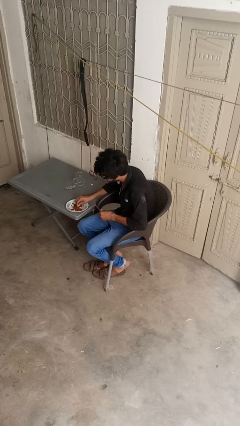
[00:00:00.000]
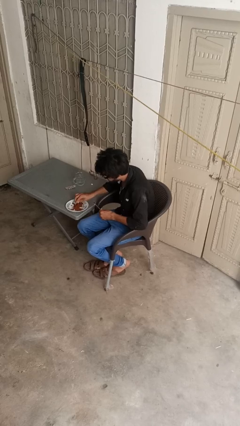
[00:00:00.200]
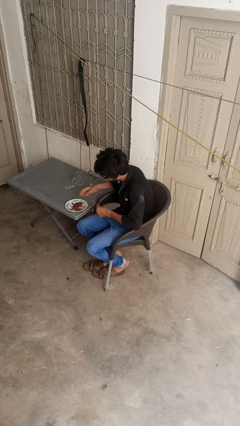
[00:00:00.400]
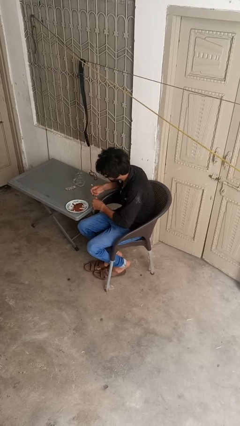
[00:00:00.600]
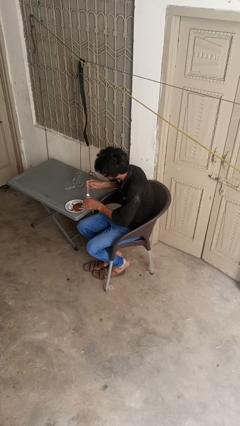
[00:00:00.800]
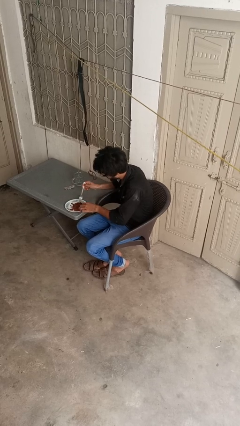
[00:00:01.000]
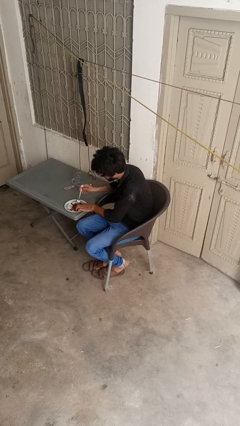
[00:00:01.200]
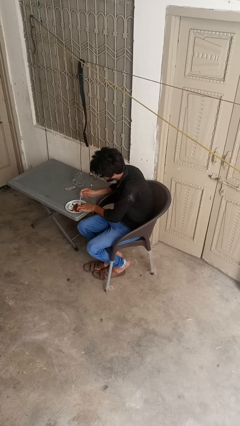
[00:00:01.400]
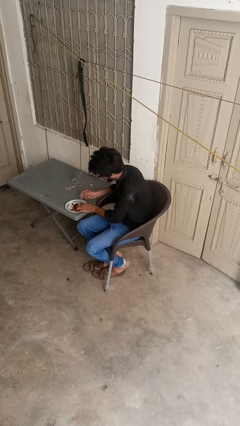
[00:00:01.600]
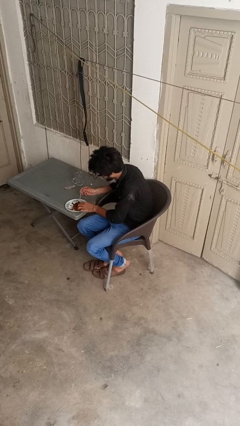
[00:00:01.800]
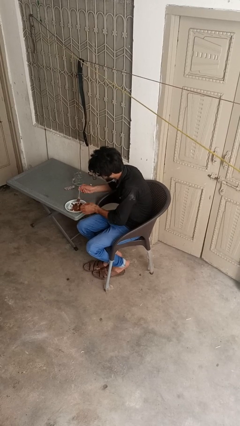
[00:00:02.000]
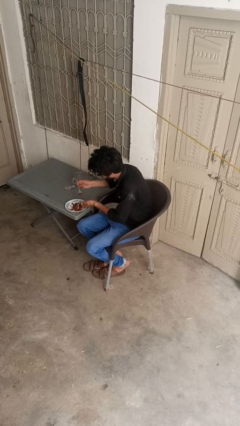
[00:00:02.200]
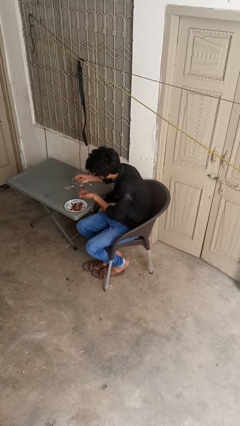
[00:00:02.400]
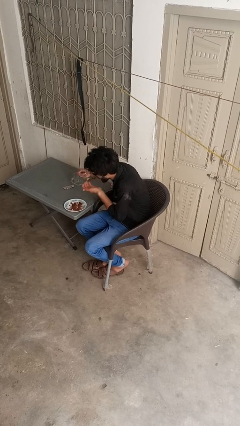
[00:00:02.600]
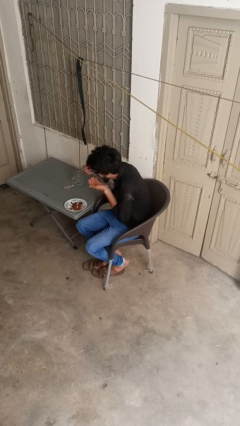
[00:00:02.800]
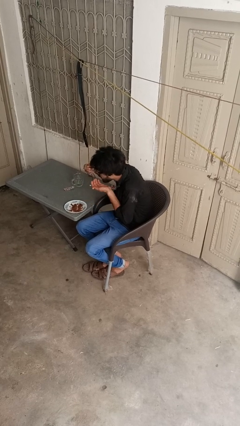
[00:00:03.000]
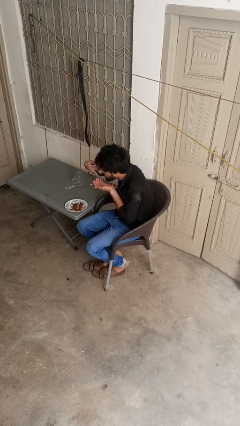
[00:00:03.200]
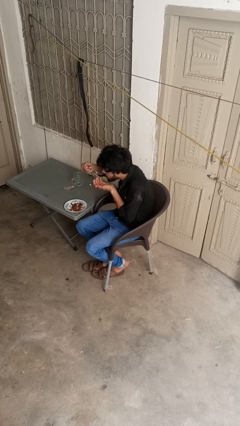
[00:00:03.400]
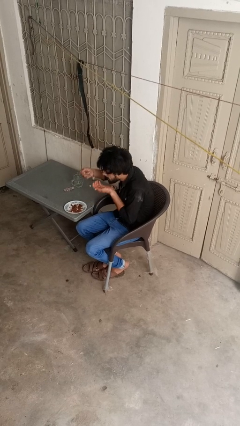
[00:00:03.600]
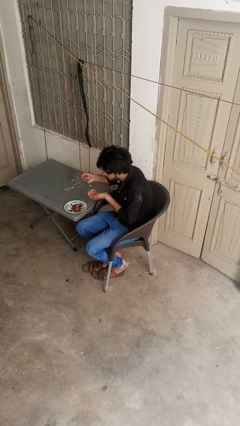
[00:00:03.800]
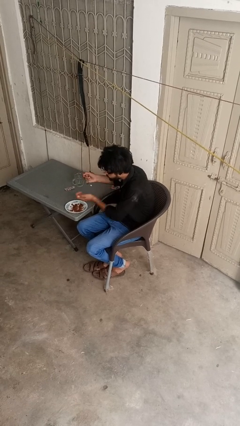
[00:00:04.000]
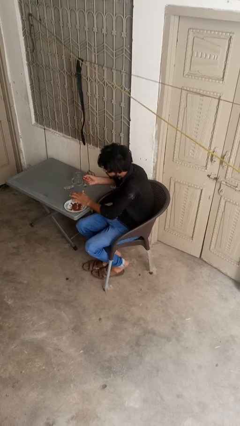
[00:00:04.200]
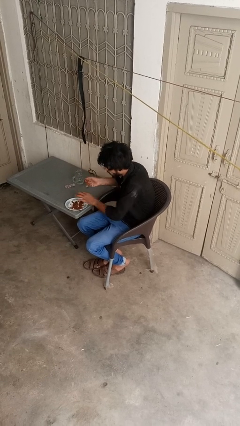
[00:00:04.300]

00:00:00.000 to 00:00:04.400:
person eats with utensil

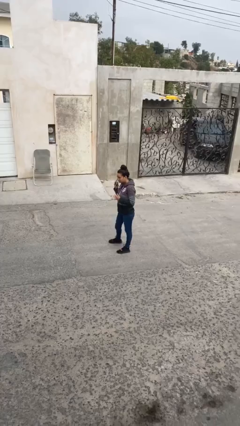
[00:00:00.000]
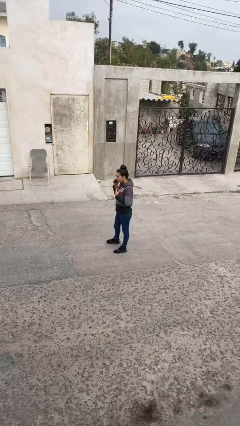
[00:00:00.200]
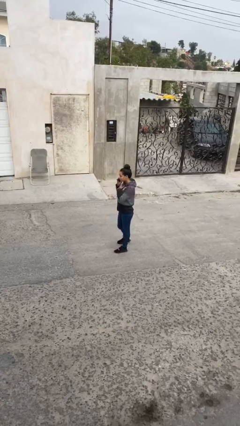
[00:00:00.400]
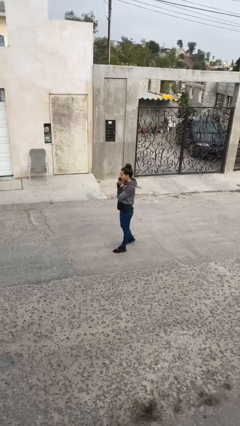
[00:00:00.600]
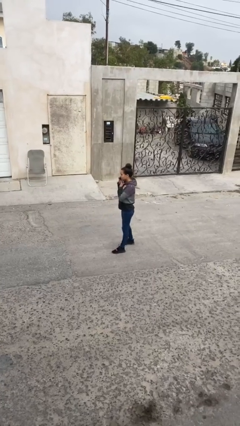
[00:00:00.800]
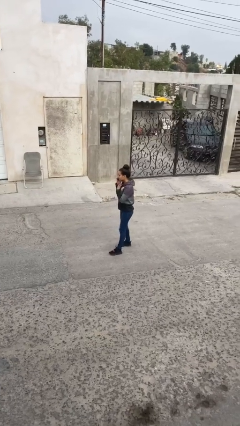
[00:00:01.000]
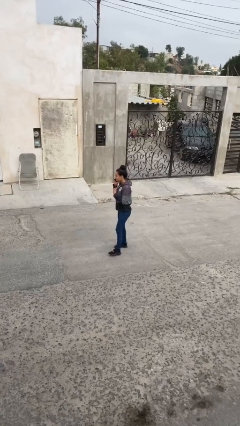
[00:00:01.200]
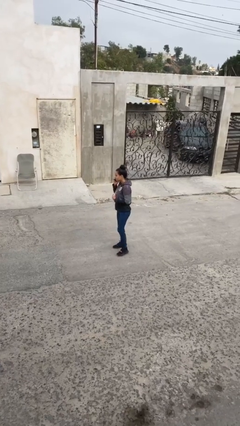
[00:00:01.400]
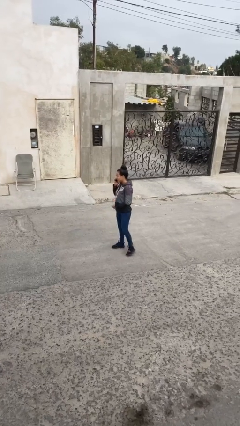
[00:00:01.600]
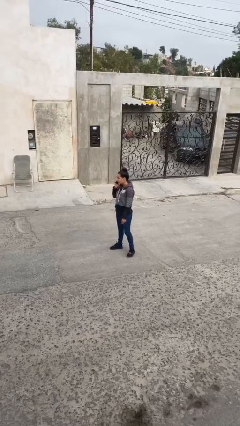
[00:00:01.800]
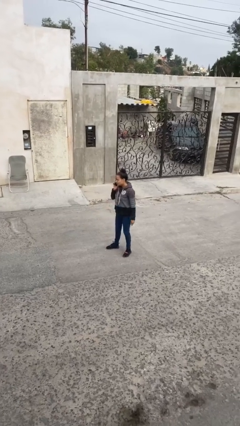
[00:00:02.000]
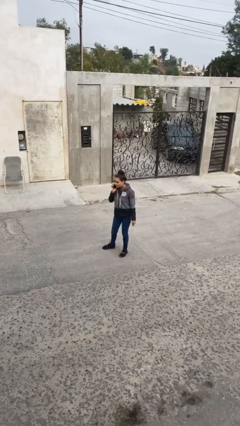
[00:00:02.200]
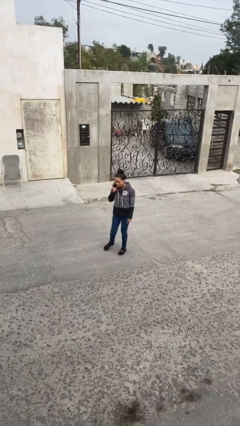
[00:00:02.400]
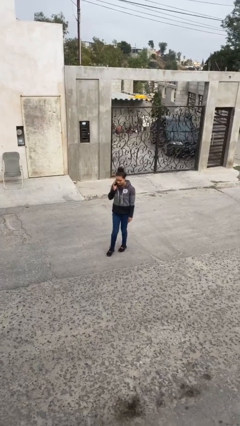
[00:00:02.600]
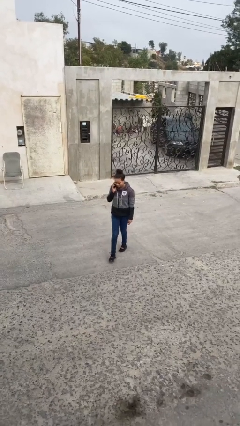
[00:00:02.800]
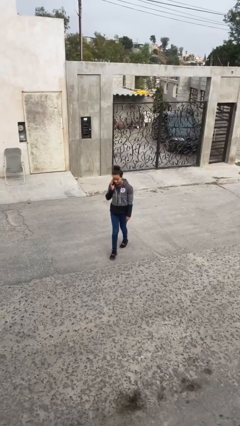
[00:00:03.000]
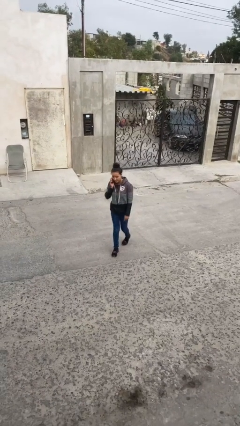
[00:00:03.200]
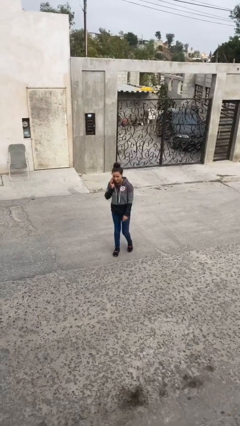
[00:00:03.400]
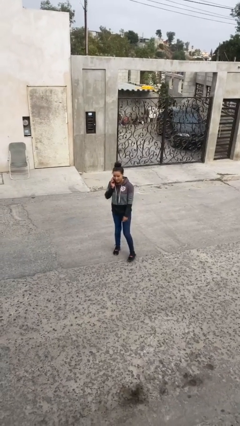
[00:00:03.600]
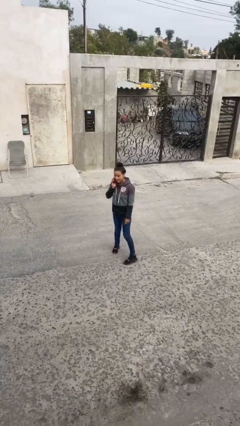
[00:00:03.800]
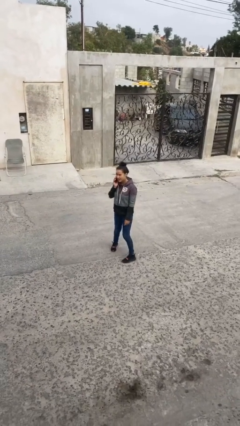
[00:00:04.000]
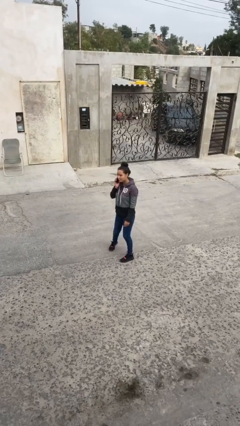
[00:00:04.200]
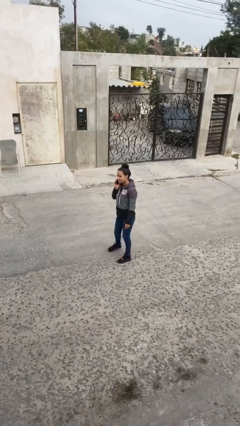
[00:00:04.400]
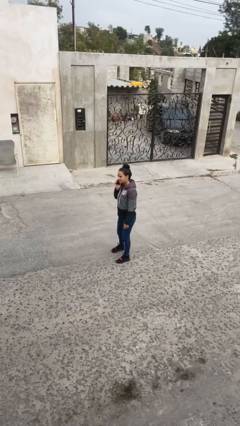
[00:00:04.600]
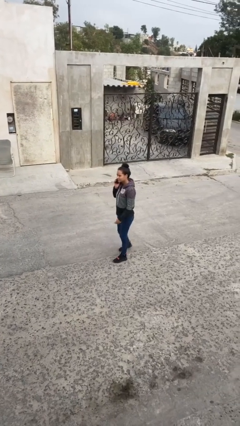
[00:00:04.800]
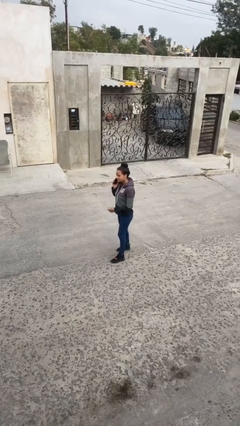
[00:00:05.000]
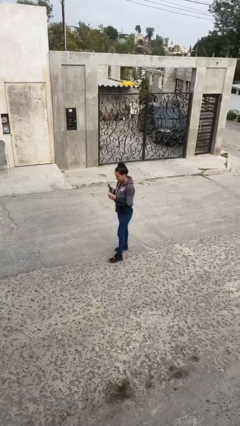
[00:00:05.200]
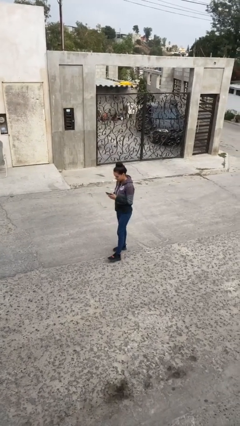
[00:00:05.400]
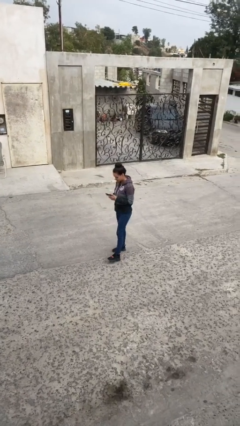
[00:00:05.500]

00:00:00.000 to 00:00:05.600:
person talks on phone

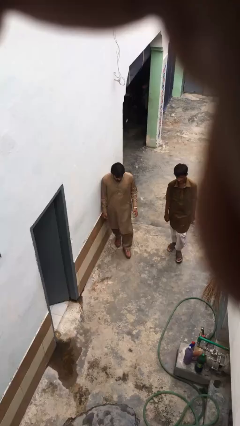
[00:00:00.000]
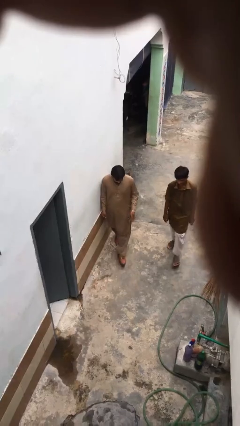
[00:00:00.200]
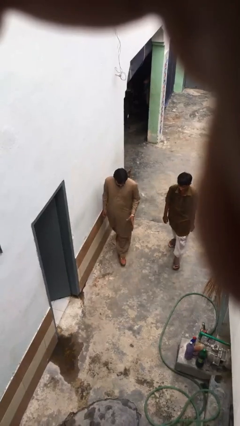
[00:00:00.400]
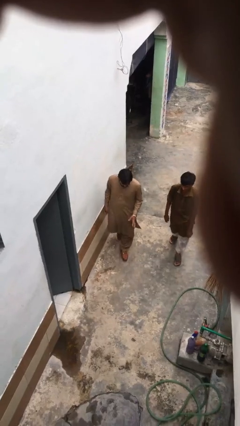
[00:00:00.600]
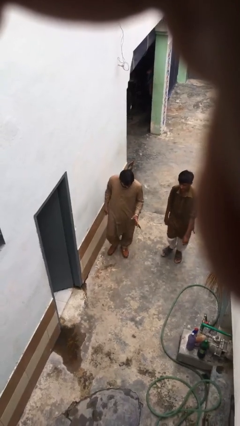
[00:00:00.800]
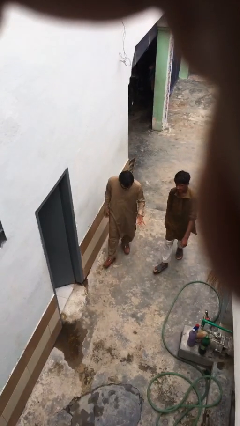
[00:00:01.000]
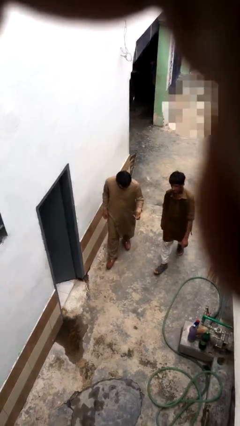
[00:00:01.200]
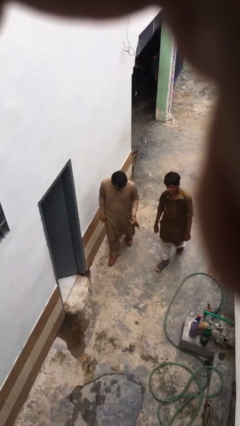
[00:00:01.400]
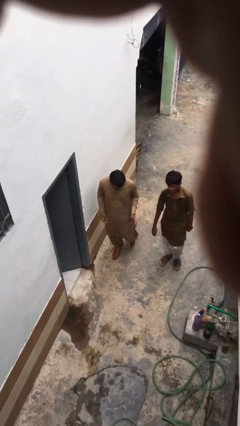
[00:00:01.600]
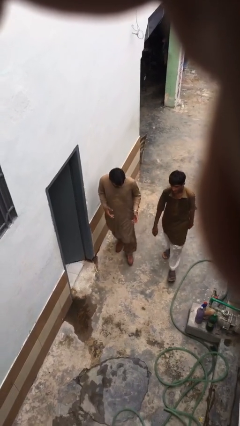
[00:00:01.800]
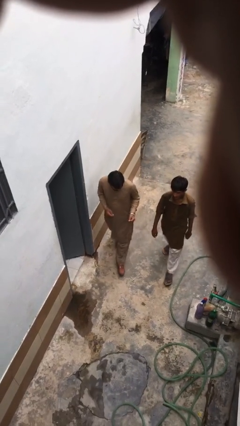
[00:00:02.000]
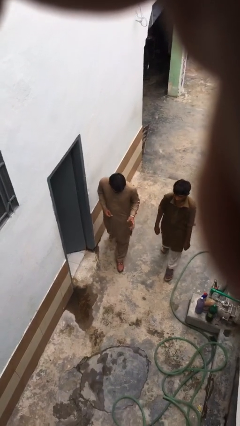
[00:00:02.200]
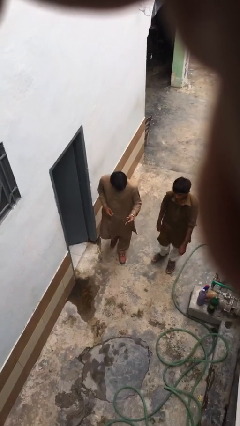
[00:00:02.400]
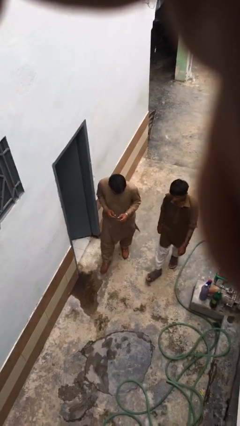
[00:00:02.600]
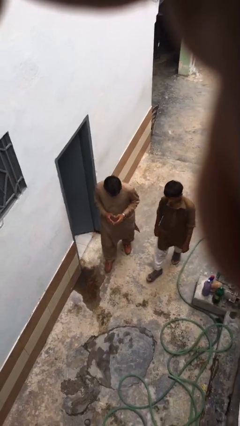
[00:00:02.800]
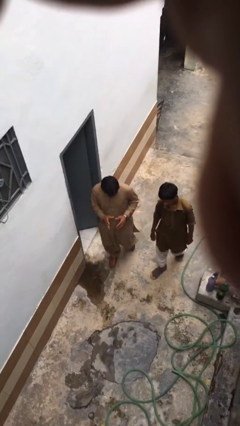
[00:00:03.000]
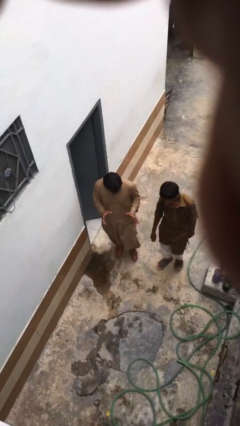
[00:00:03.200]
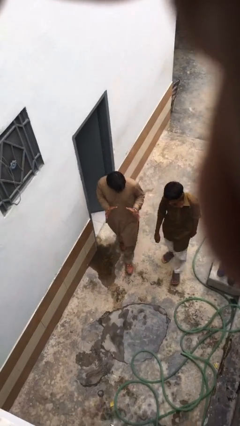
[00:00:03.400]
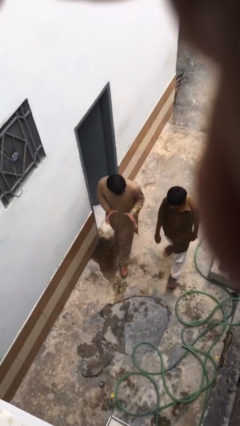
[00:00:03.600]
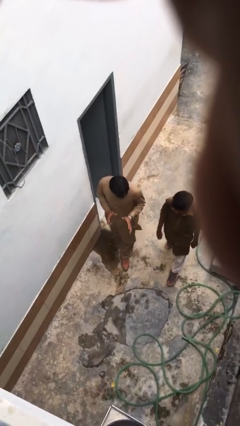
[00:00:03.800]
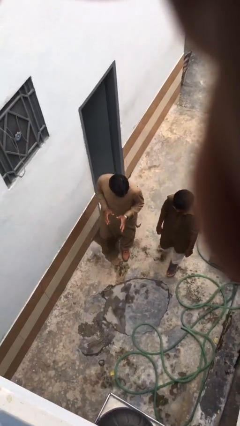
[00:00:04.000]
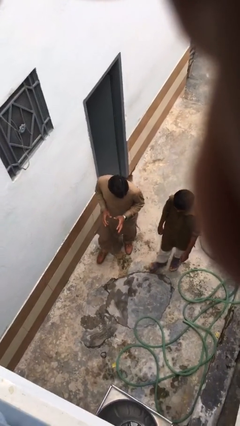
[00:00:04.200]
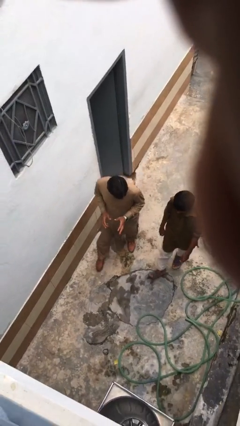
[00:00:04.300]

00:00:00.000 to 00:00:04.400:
person talks to person

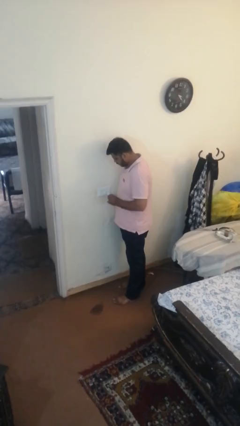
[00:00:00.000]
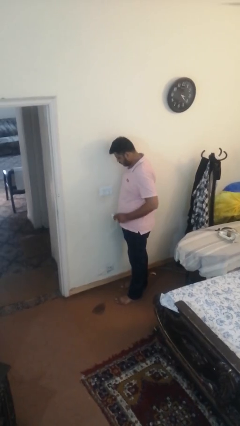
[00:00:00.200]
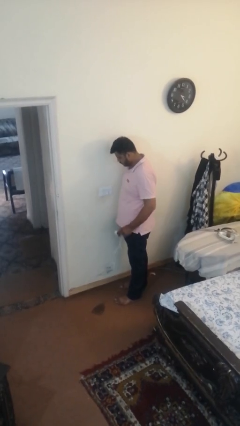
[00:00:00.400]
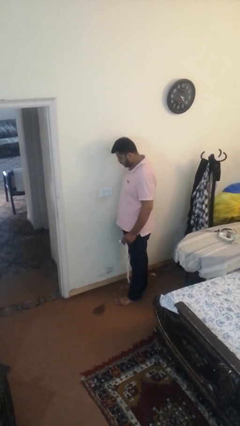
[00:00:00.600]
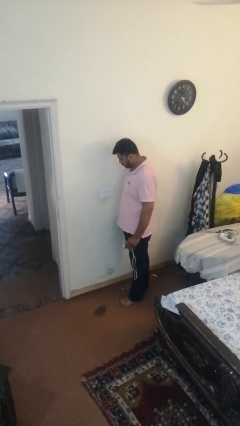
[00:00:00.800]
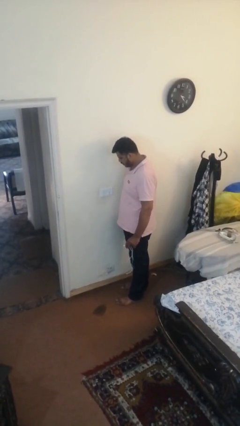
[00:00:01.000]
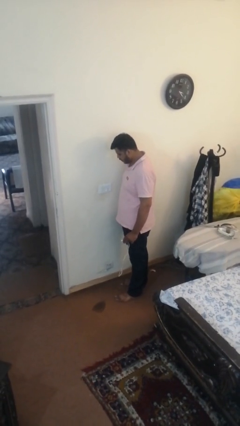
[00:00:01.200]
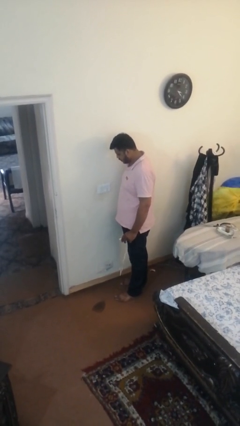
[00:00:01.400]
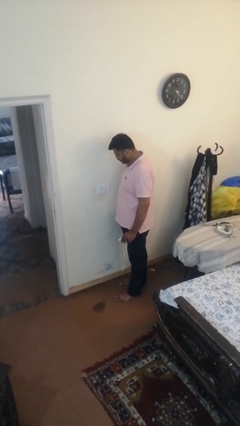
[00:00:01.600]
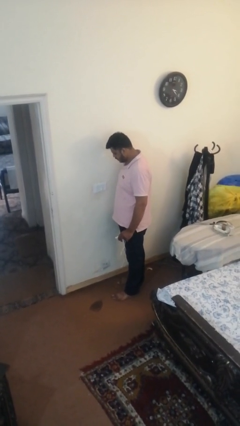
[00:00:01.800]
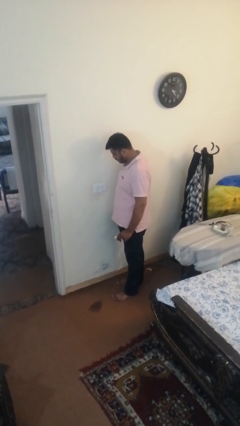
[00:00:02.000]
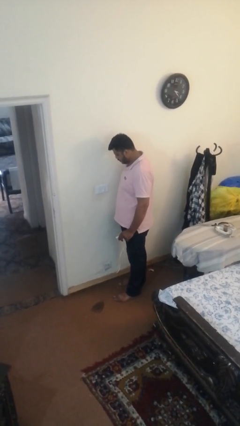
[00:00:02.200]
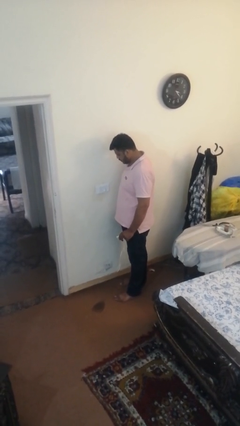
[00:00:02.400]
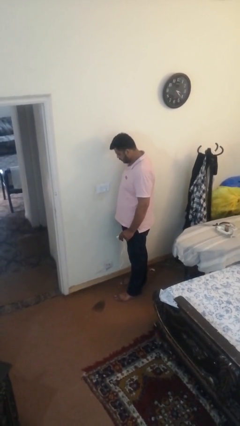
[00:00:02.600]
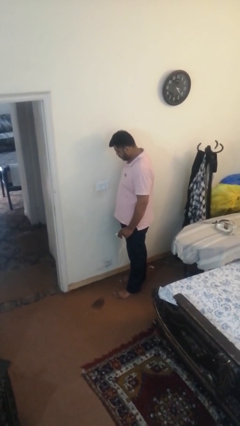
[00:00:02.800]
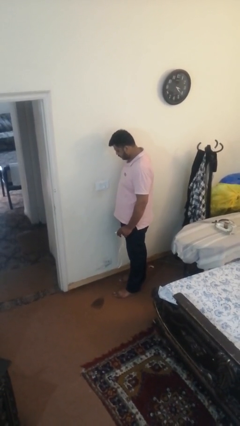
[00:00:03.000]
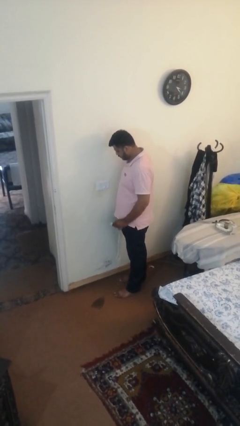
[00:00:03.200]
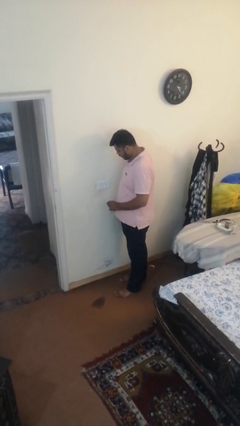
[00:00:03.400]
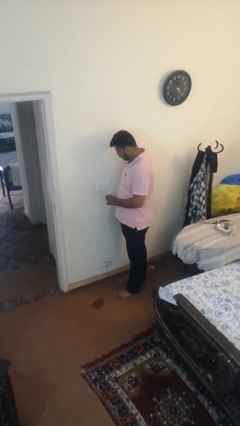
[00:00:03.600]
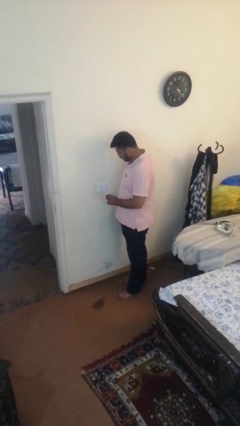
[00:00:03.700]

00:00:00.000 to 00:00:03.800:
person unplugs from electrical socket
